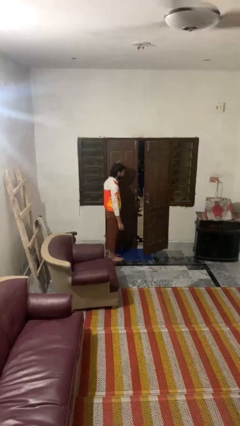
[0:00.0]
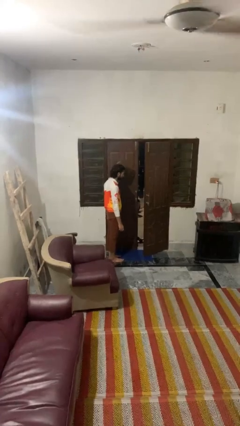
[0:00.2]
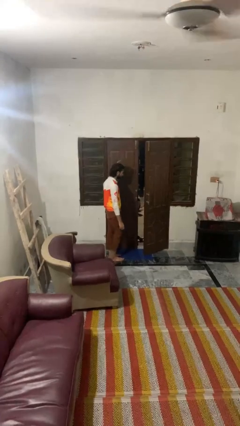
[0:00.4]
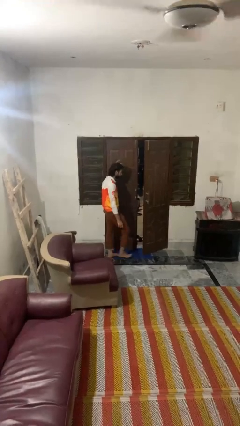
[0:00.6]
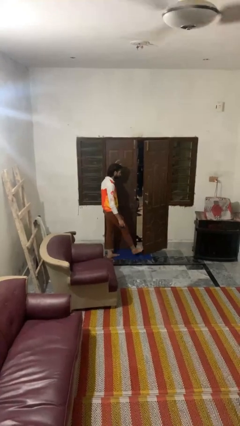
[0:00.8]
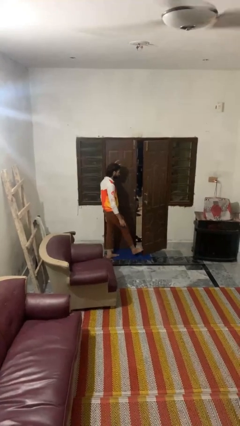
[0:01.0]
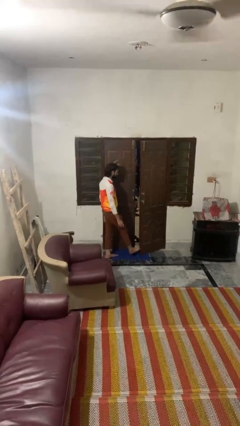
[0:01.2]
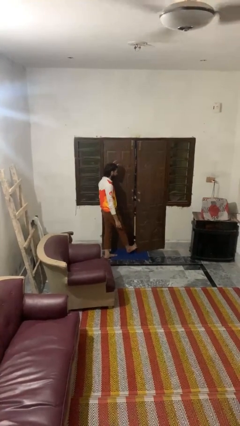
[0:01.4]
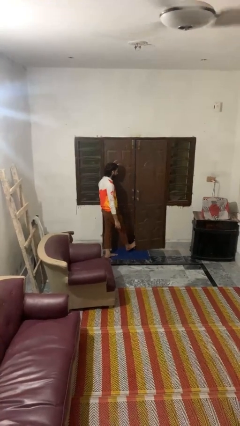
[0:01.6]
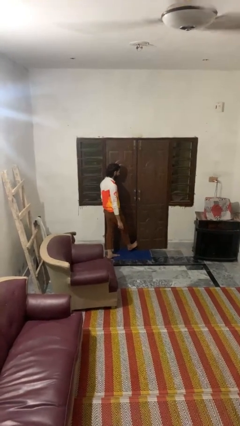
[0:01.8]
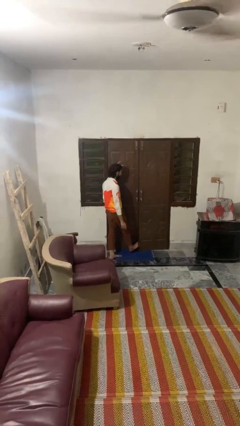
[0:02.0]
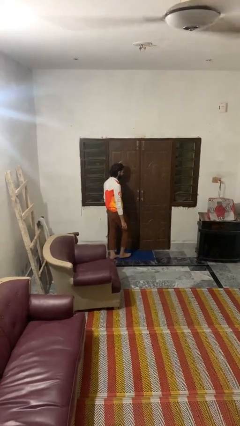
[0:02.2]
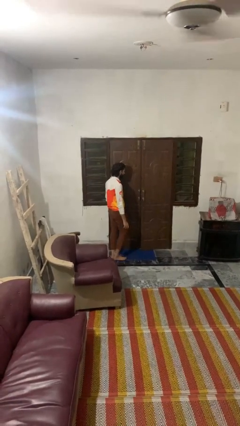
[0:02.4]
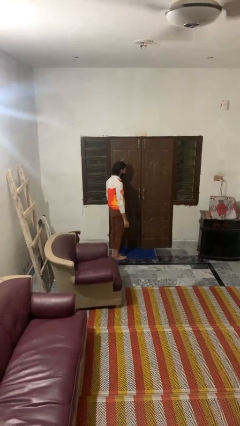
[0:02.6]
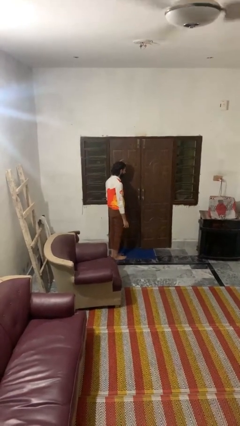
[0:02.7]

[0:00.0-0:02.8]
person closes door with foot

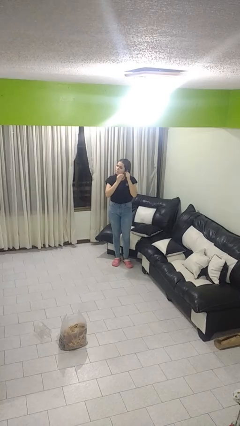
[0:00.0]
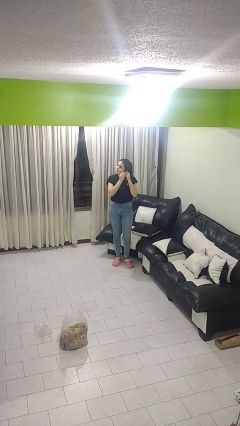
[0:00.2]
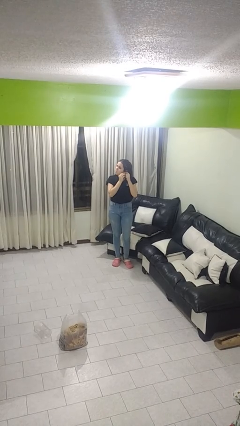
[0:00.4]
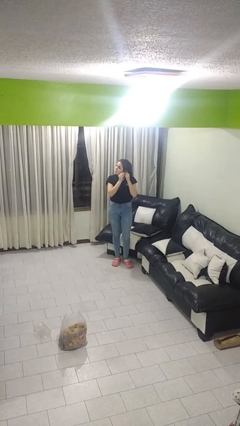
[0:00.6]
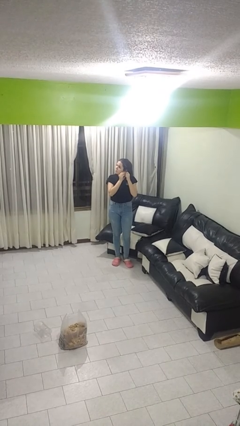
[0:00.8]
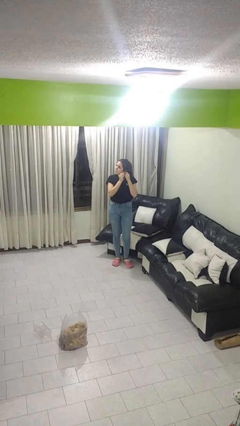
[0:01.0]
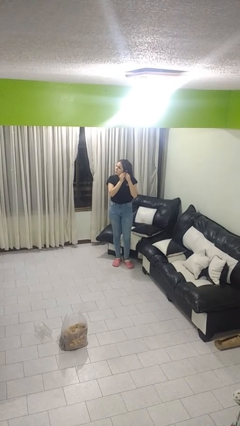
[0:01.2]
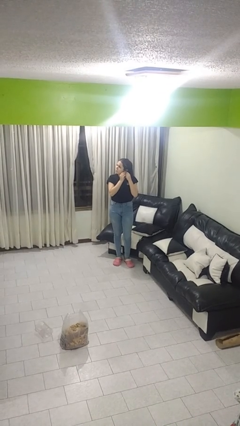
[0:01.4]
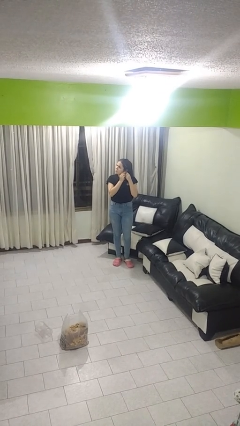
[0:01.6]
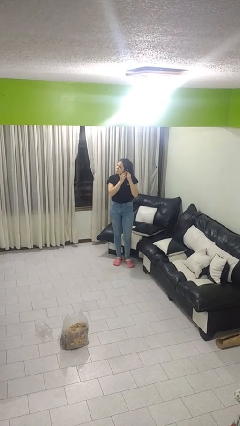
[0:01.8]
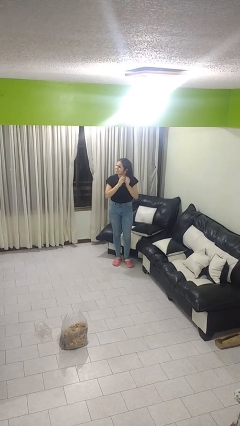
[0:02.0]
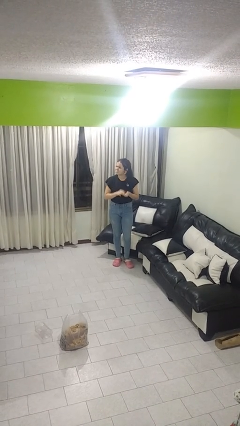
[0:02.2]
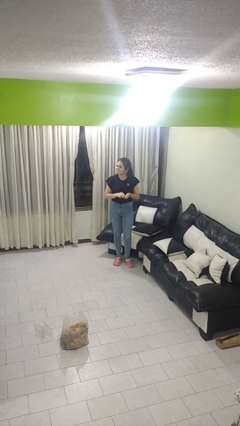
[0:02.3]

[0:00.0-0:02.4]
person puts on earrings

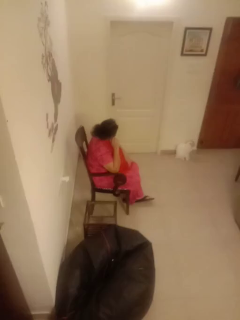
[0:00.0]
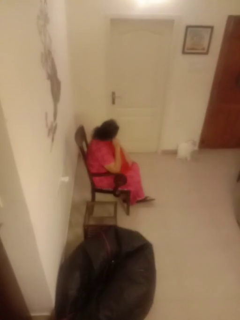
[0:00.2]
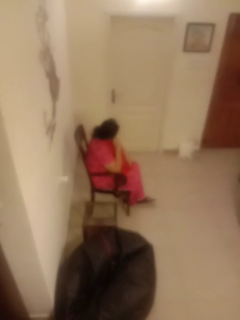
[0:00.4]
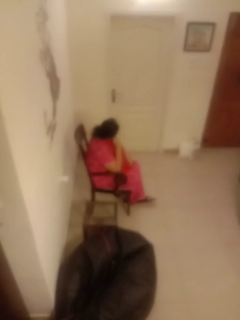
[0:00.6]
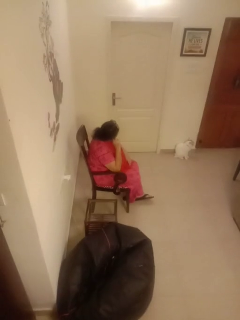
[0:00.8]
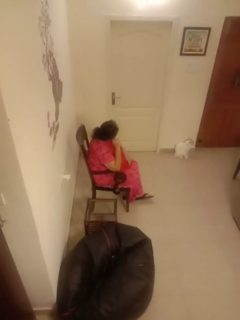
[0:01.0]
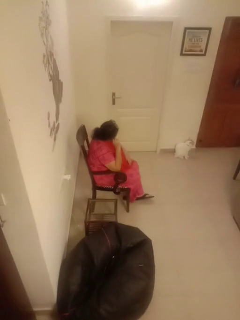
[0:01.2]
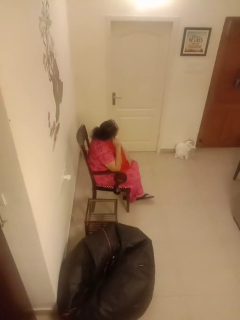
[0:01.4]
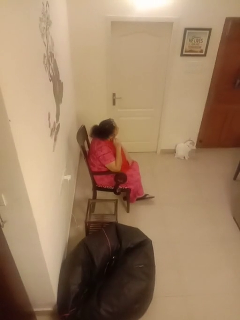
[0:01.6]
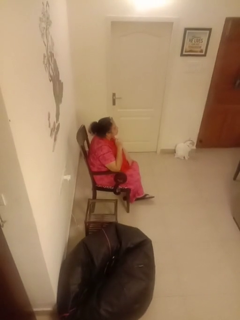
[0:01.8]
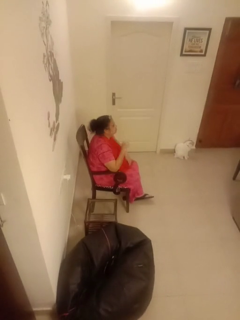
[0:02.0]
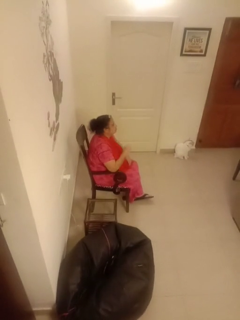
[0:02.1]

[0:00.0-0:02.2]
person touches earlobe

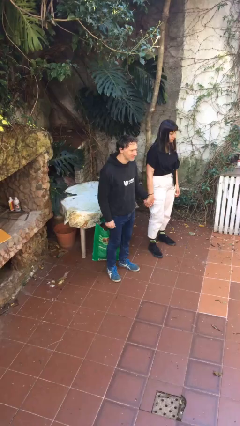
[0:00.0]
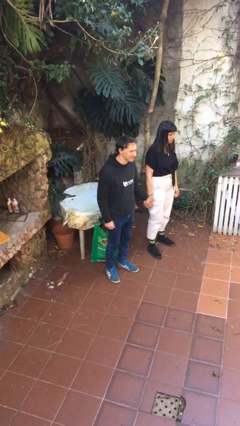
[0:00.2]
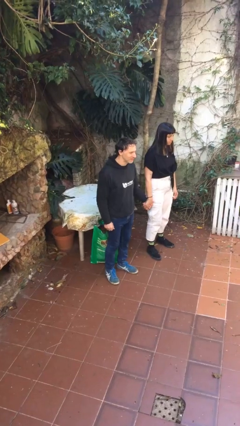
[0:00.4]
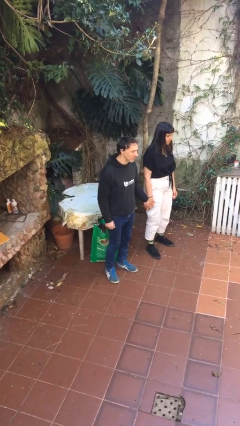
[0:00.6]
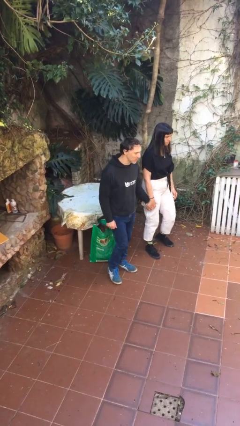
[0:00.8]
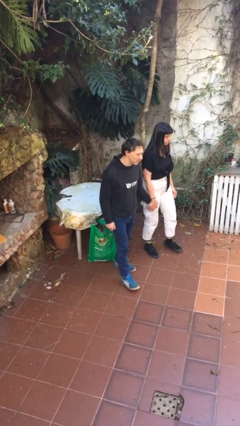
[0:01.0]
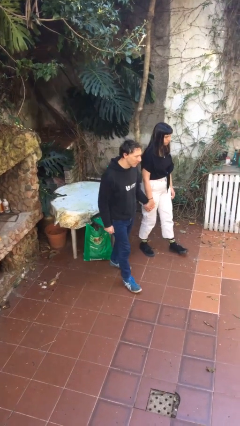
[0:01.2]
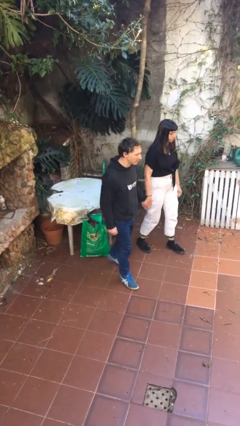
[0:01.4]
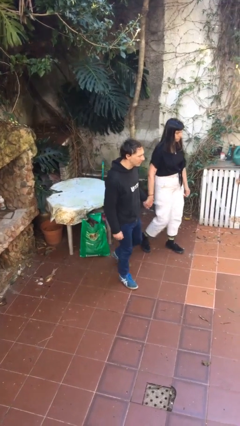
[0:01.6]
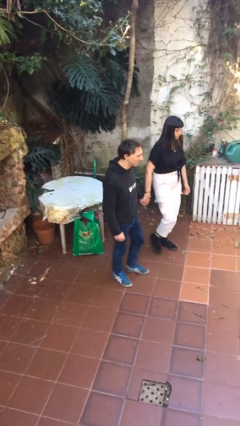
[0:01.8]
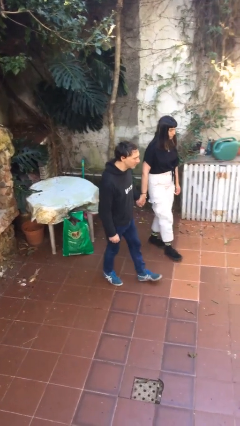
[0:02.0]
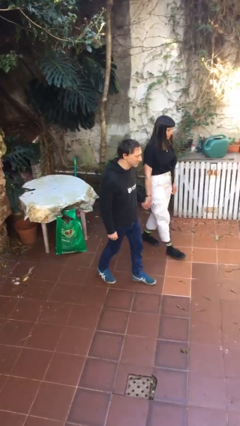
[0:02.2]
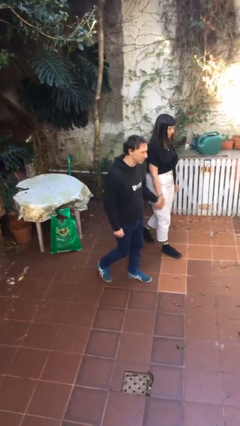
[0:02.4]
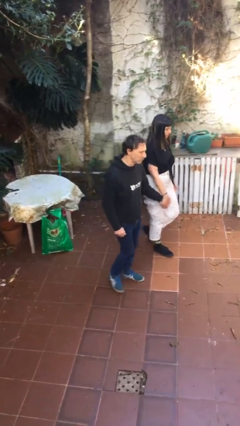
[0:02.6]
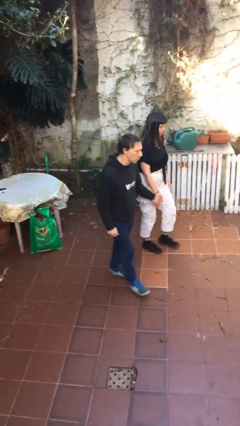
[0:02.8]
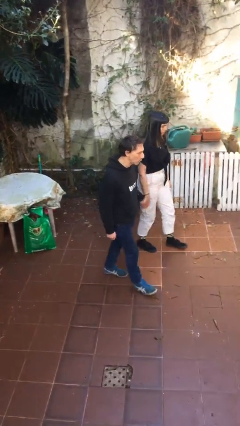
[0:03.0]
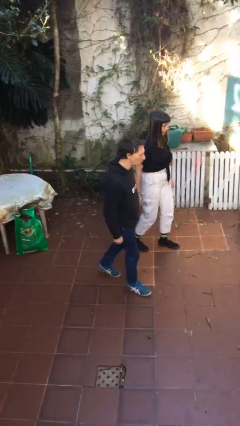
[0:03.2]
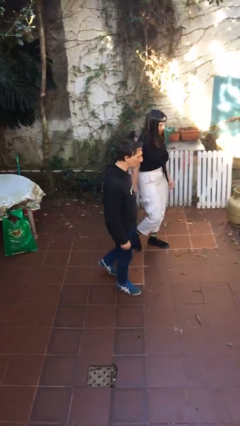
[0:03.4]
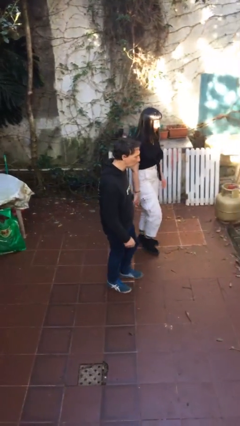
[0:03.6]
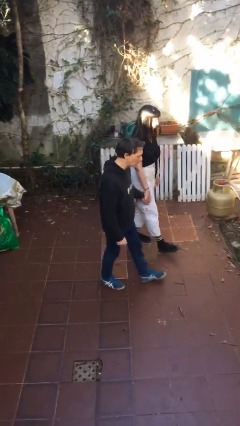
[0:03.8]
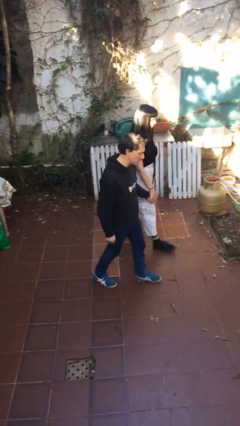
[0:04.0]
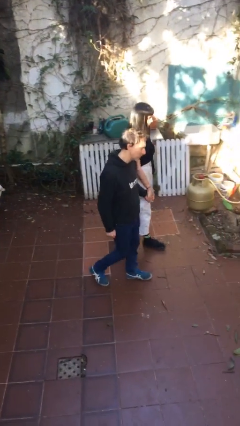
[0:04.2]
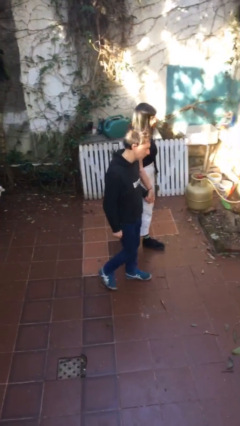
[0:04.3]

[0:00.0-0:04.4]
person holds hand

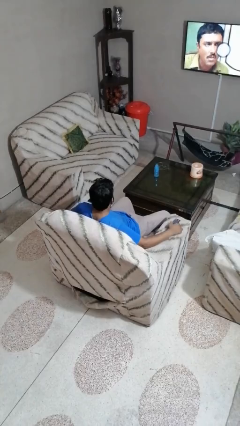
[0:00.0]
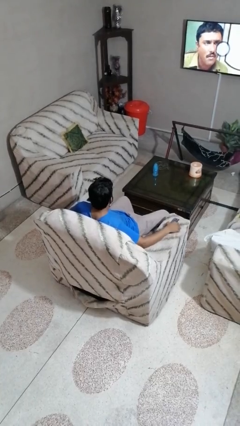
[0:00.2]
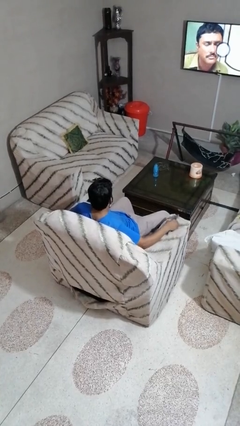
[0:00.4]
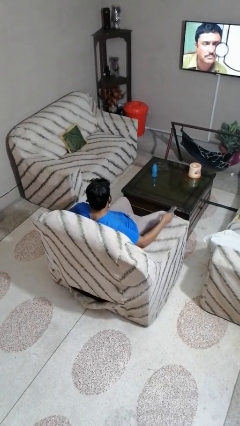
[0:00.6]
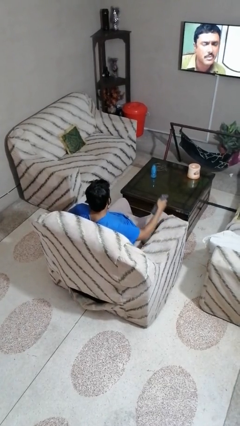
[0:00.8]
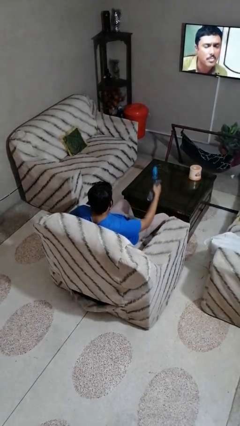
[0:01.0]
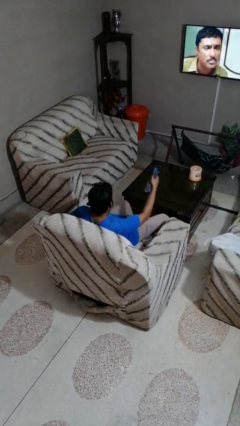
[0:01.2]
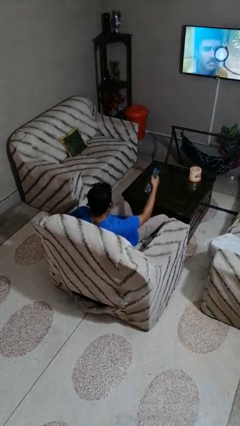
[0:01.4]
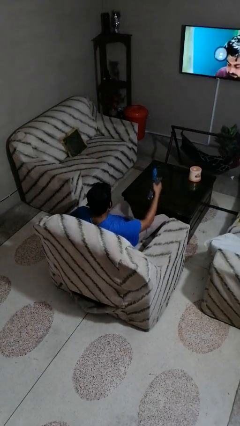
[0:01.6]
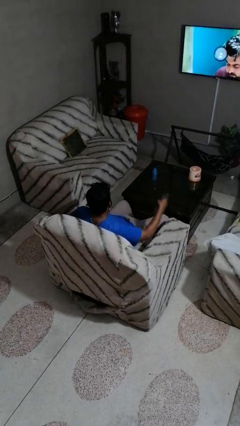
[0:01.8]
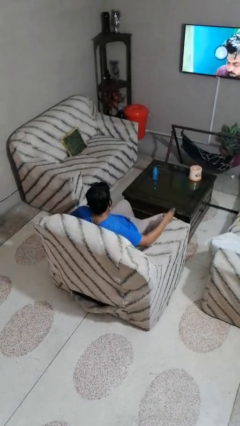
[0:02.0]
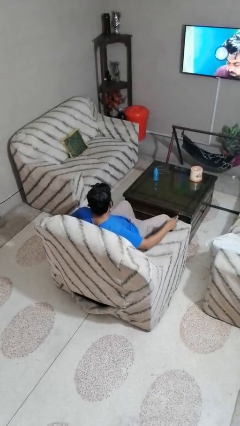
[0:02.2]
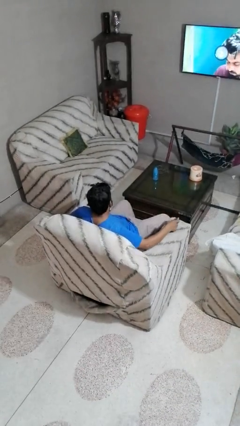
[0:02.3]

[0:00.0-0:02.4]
person uses television remote

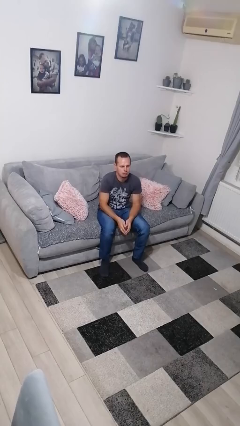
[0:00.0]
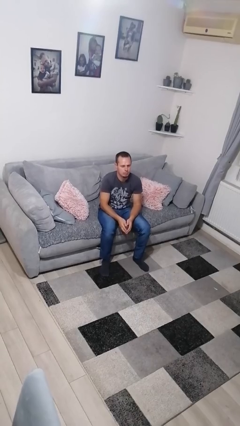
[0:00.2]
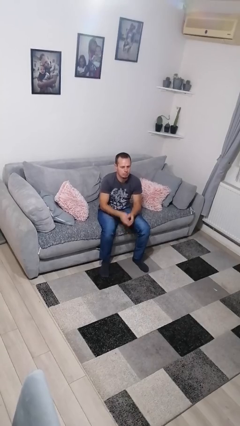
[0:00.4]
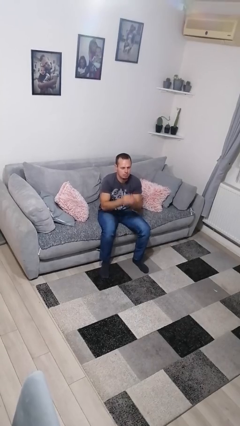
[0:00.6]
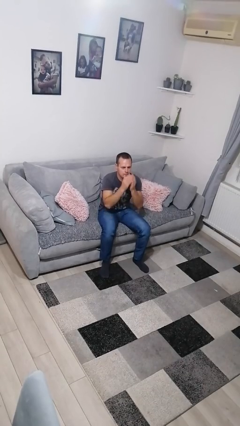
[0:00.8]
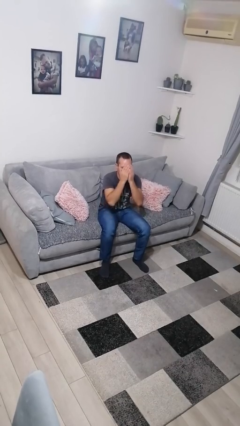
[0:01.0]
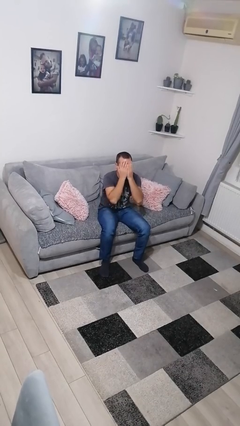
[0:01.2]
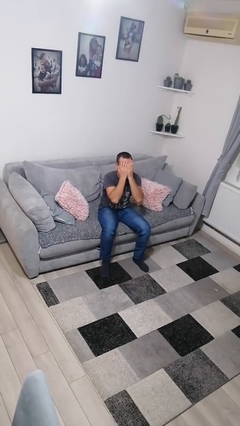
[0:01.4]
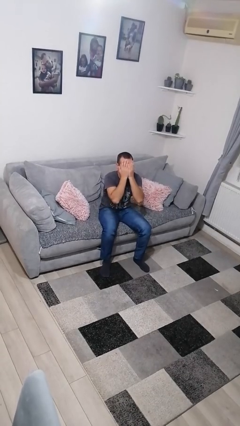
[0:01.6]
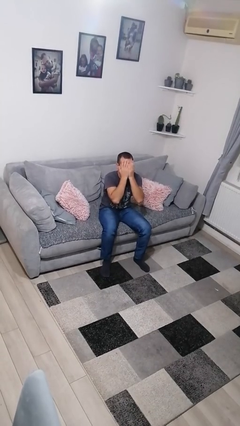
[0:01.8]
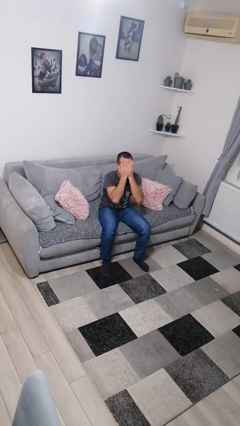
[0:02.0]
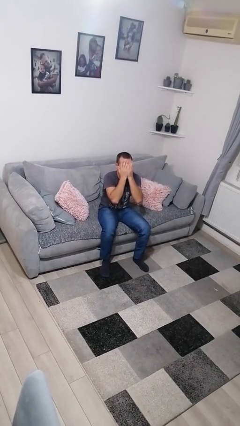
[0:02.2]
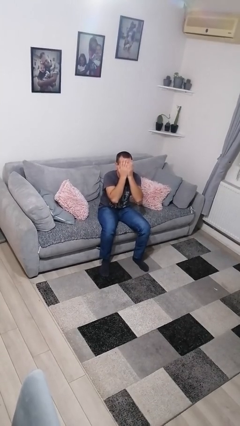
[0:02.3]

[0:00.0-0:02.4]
person covers face with hands

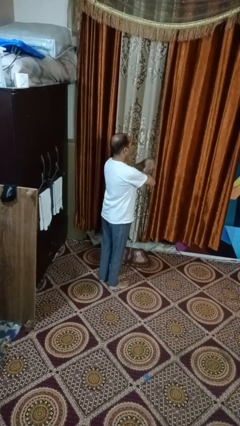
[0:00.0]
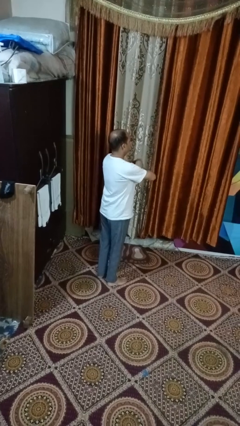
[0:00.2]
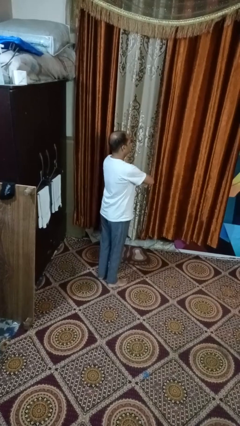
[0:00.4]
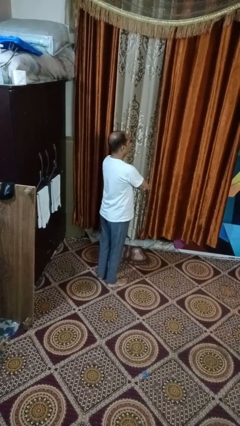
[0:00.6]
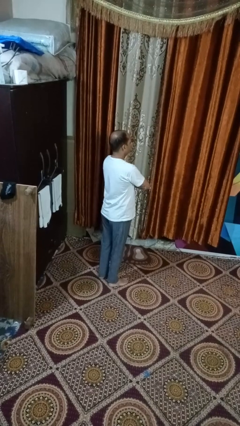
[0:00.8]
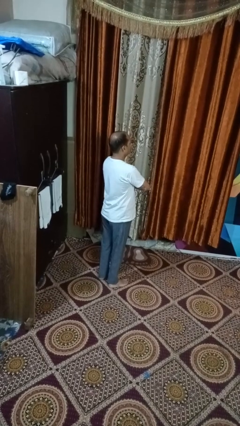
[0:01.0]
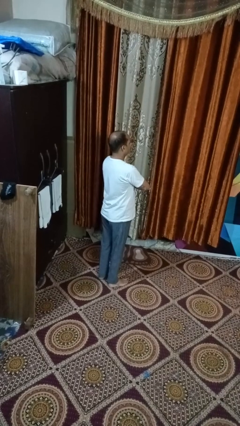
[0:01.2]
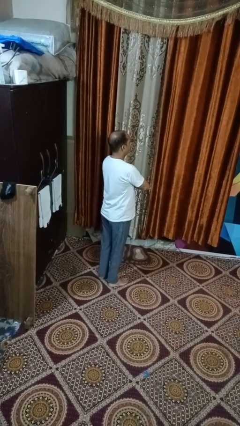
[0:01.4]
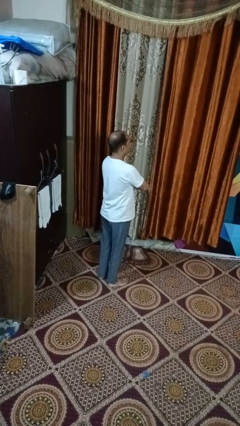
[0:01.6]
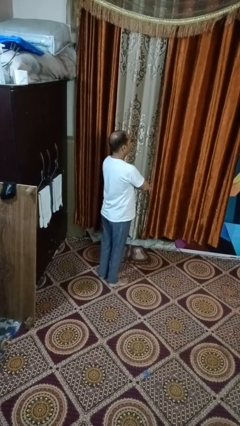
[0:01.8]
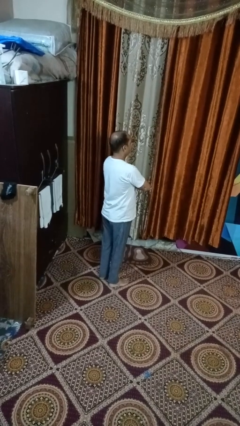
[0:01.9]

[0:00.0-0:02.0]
person crosses arms
